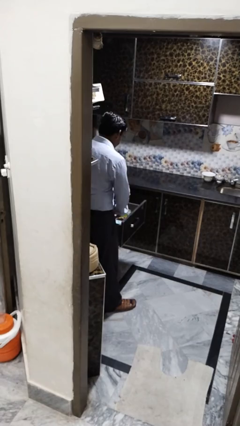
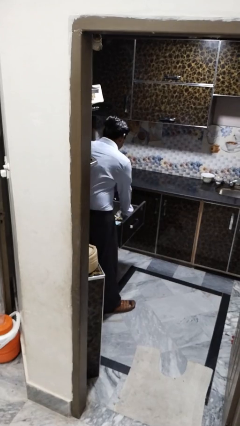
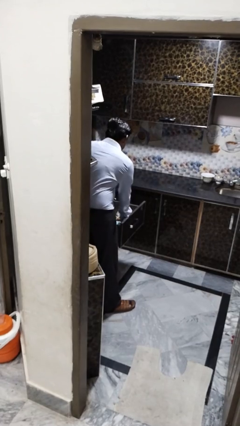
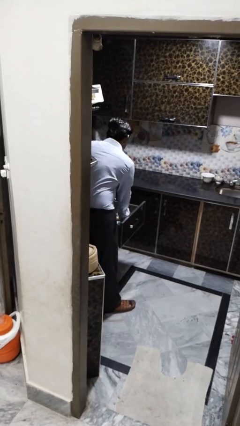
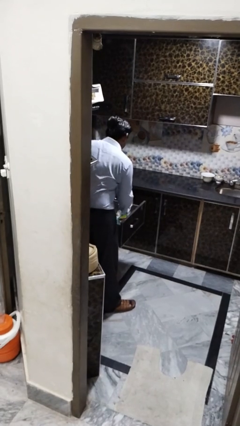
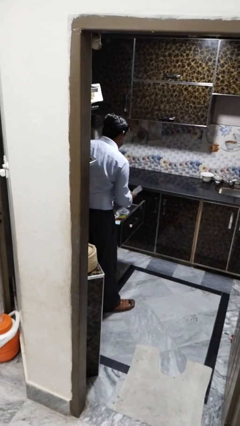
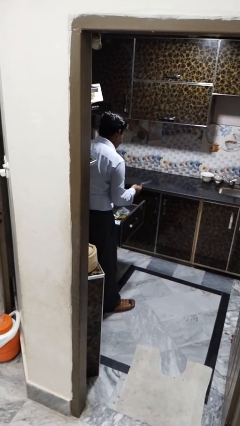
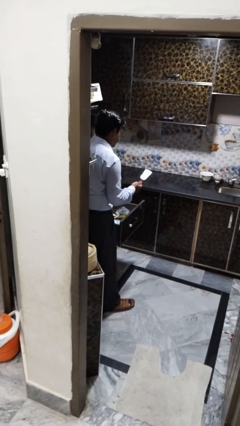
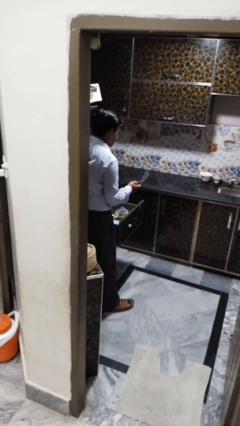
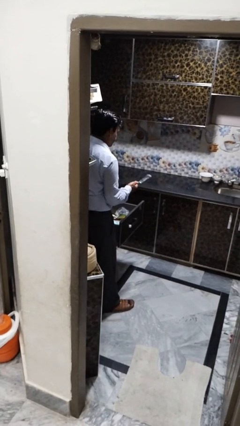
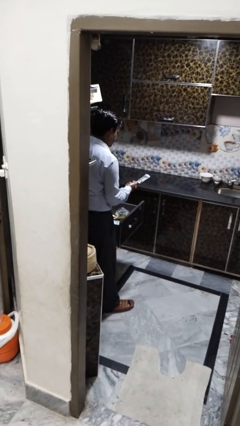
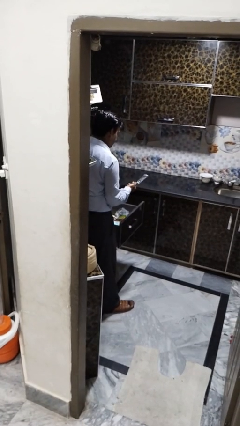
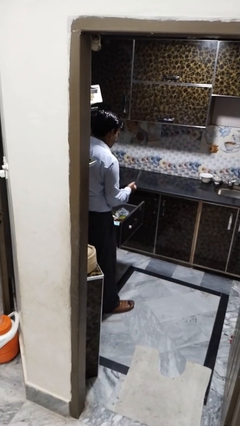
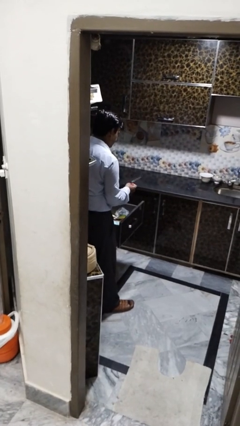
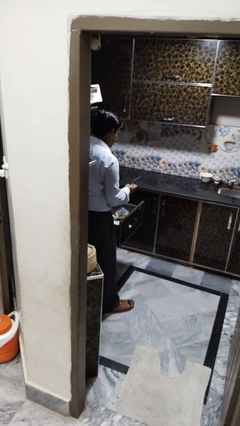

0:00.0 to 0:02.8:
person takes object from kitchen drawer

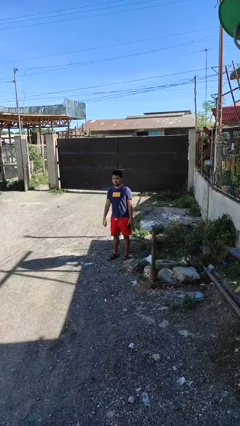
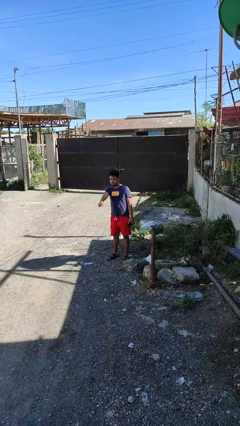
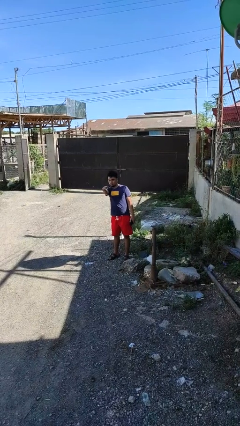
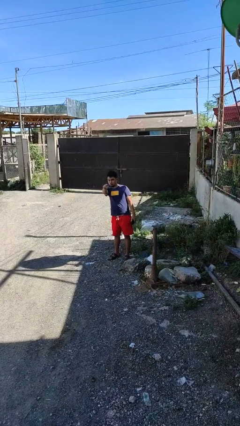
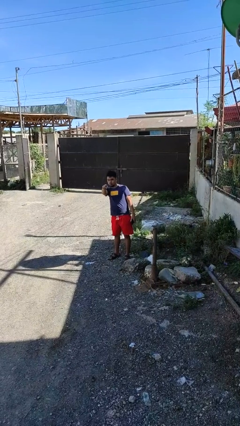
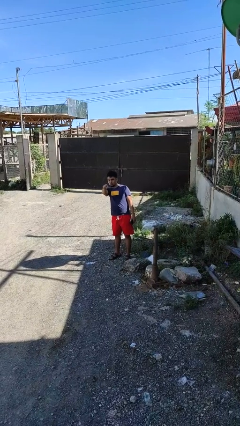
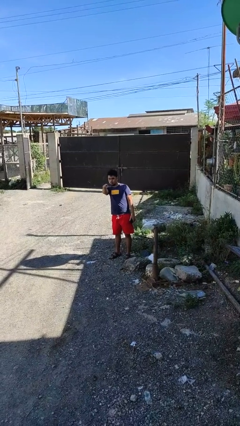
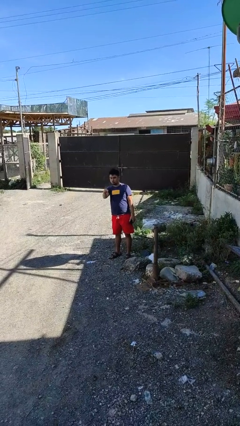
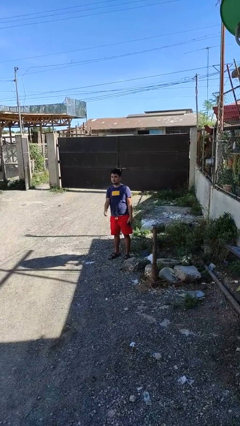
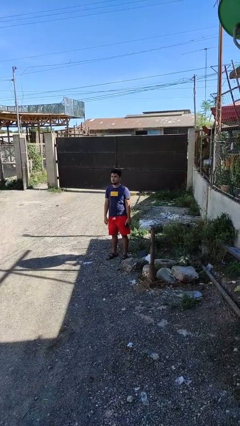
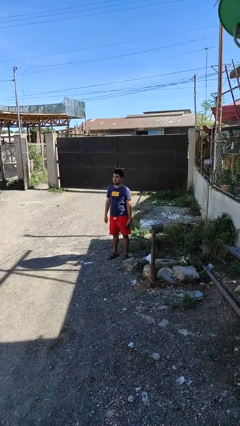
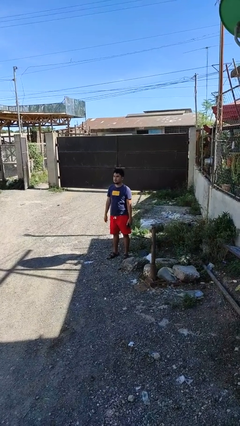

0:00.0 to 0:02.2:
person points at person

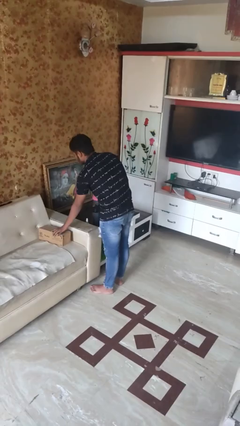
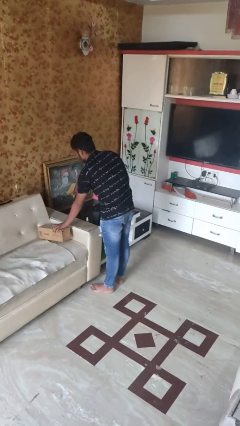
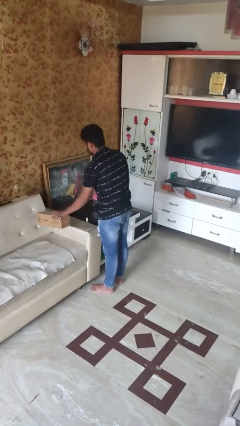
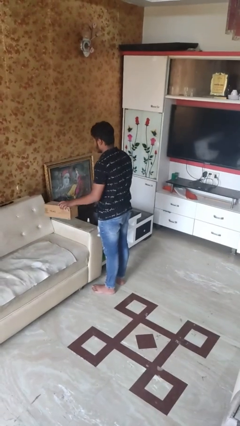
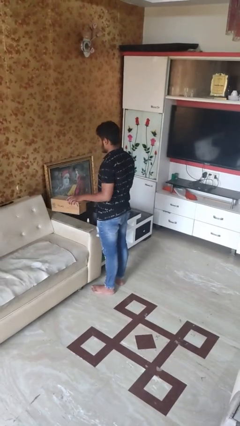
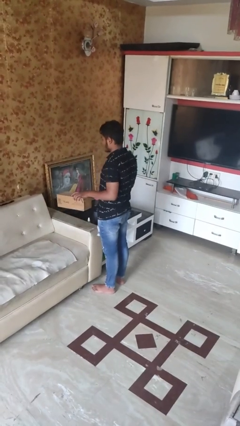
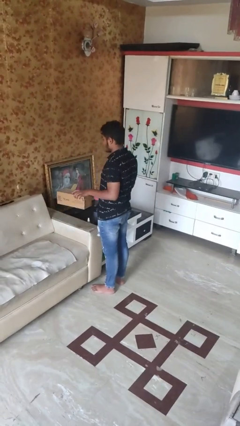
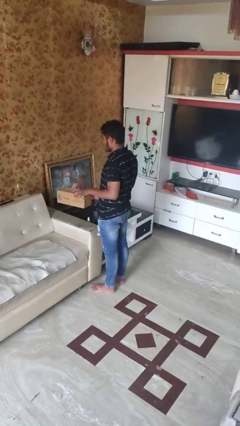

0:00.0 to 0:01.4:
person picks up object from couch

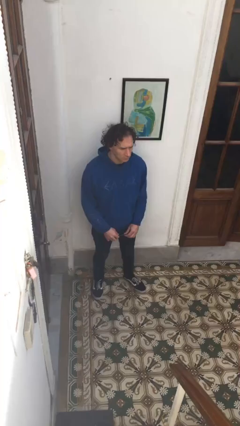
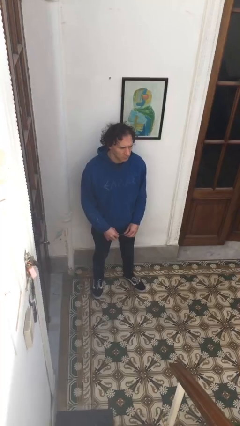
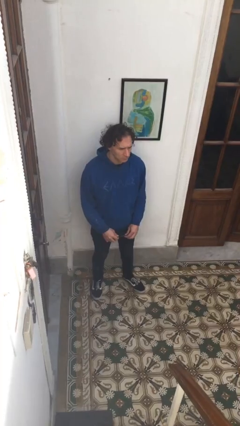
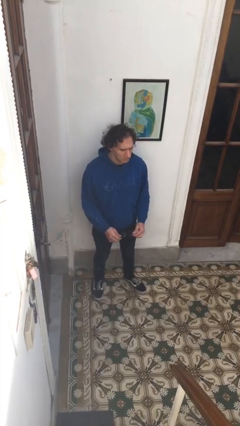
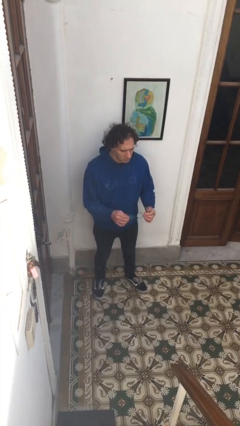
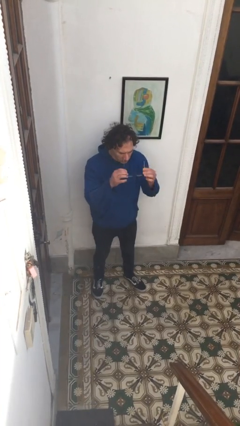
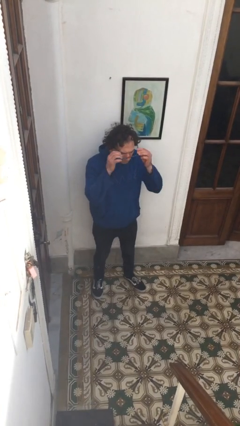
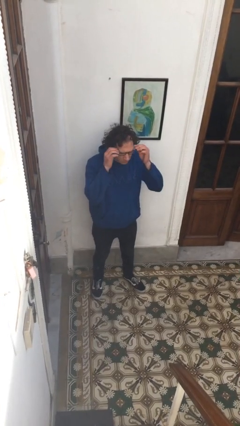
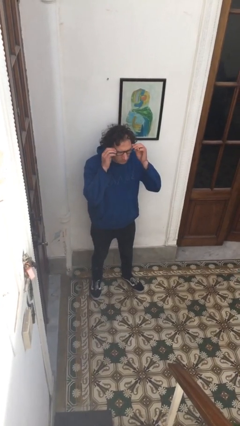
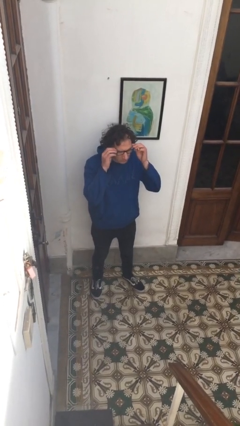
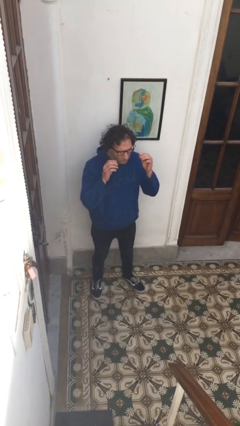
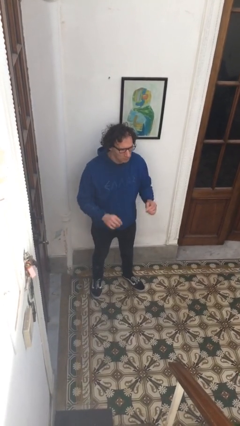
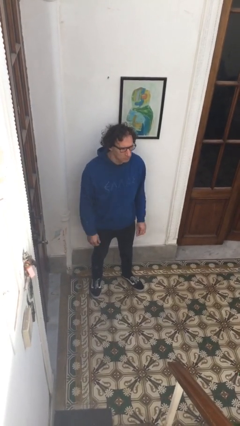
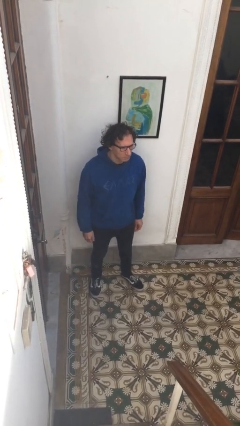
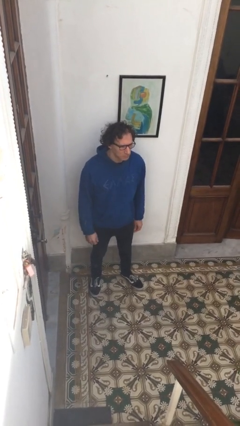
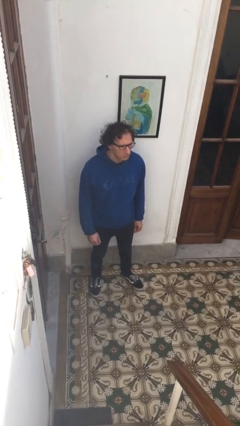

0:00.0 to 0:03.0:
person puts on glasses

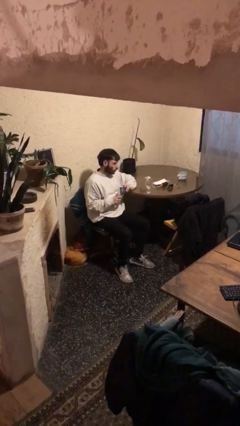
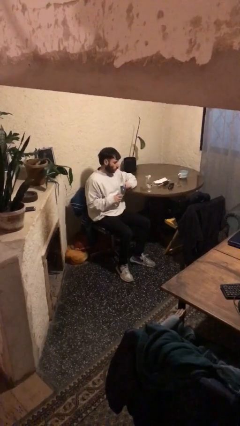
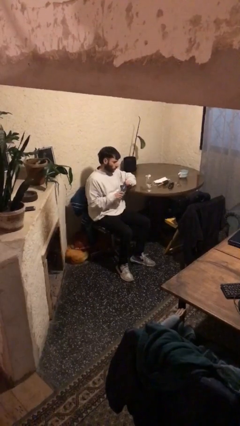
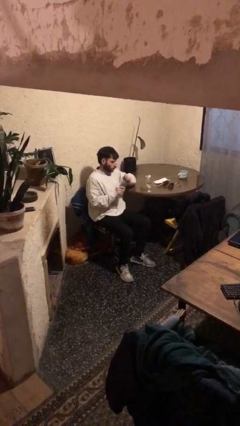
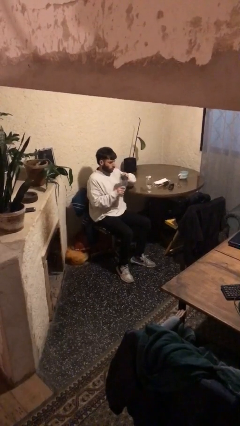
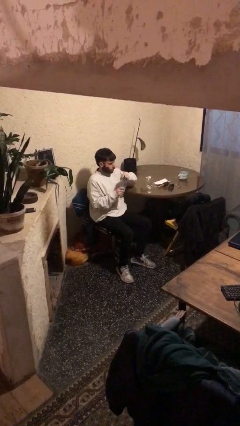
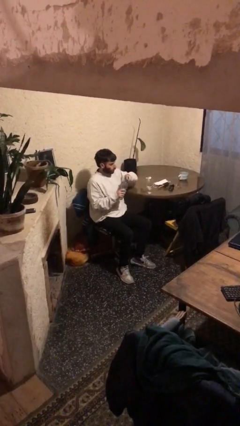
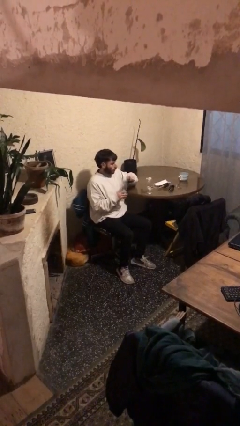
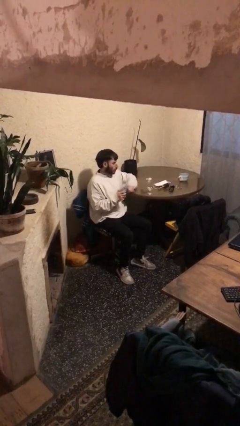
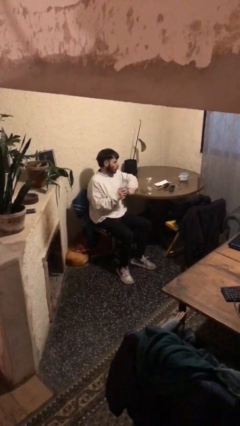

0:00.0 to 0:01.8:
person unscrews lid from bottle

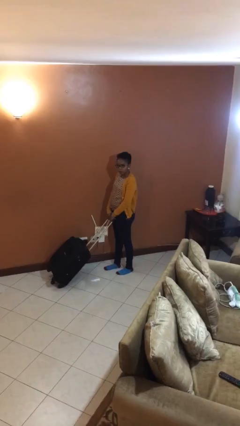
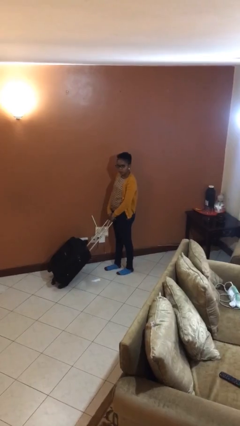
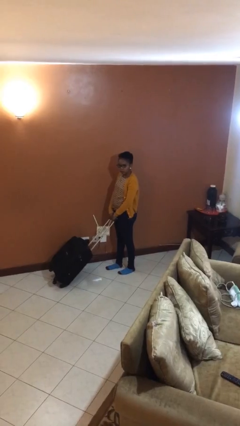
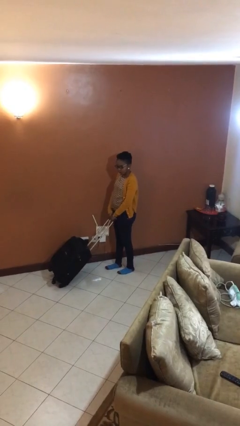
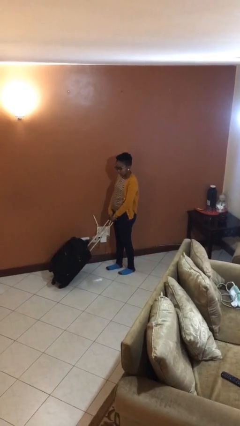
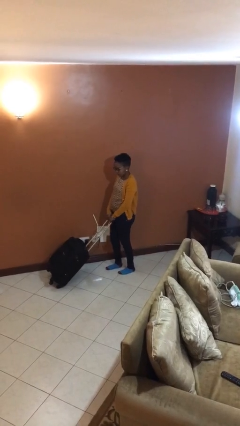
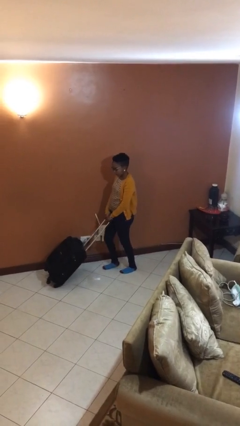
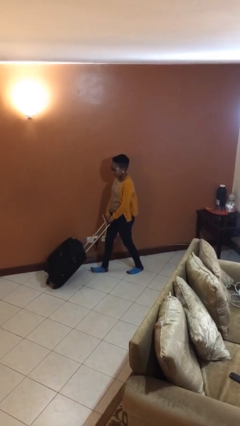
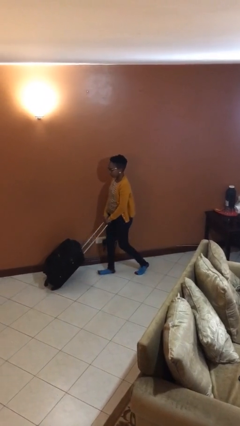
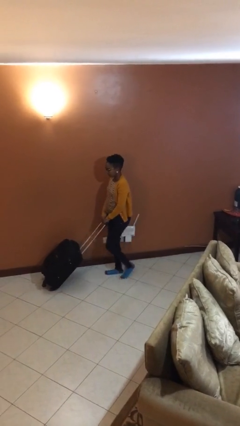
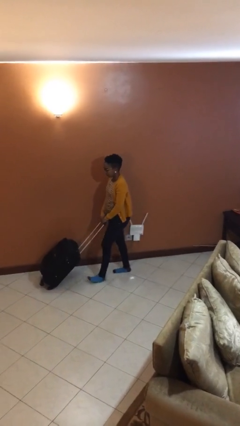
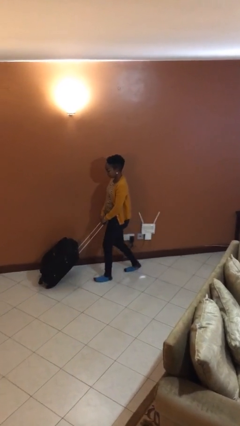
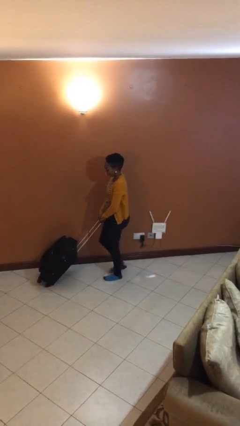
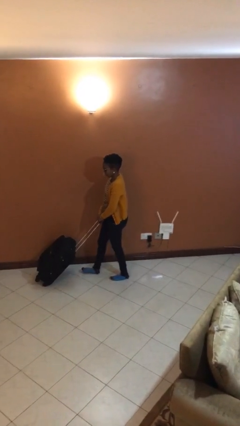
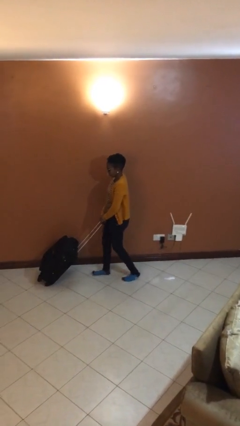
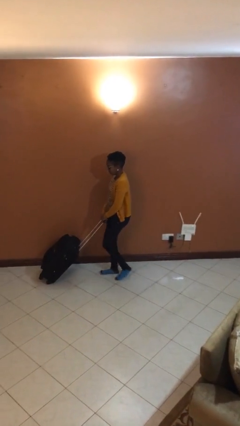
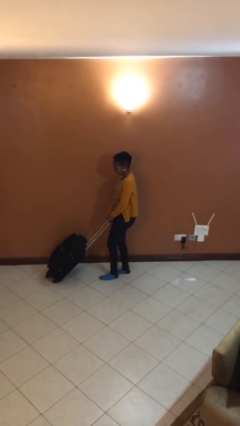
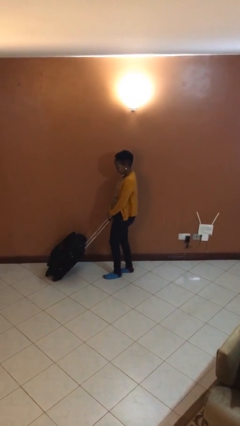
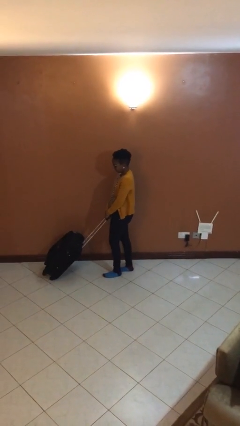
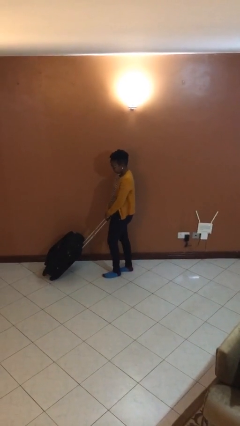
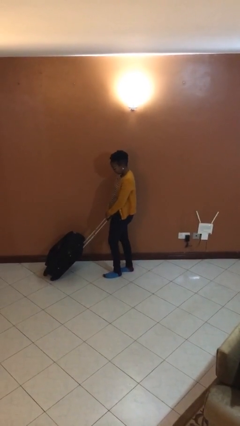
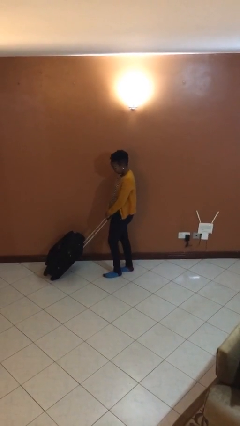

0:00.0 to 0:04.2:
person pushes wheeled cart

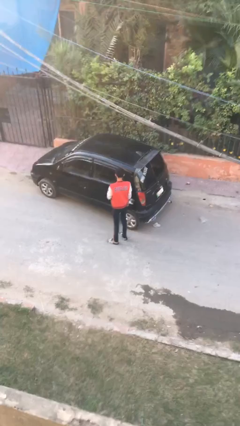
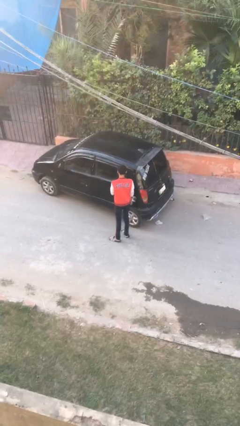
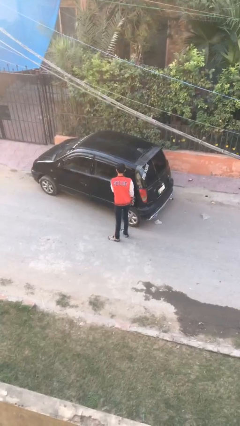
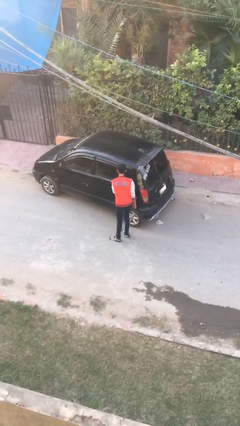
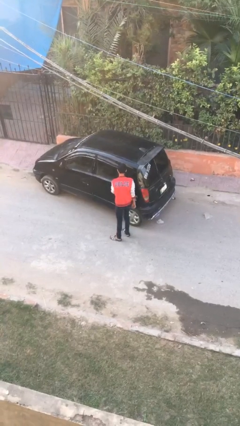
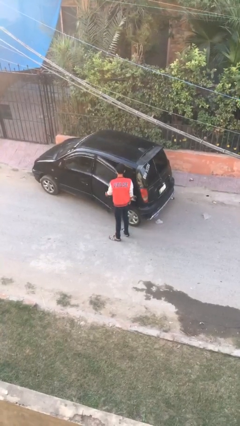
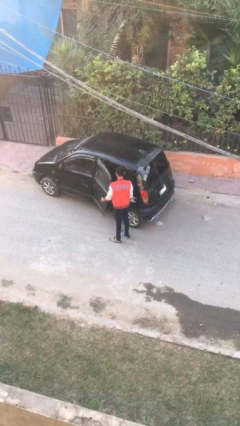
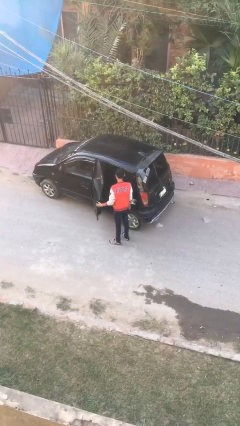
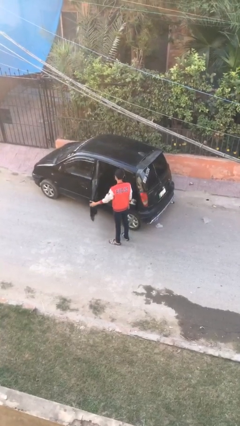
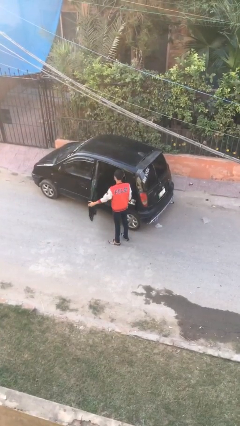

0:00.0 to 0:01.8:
person opens car door
